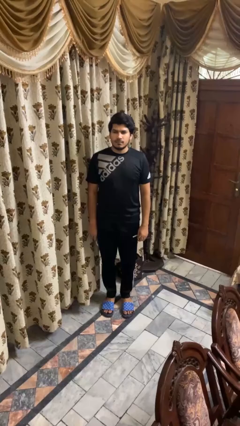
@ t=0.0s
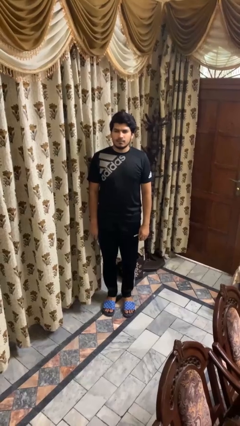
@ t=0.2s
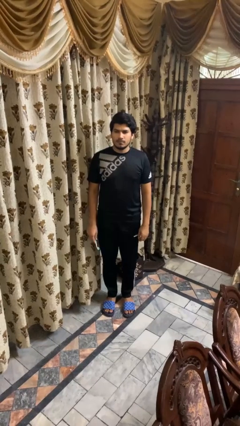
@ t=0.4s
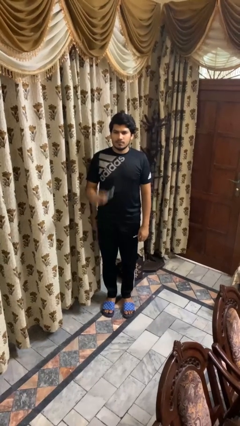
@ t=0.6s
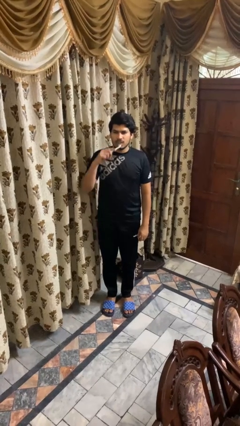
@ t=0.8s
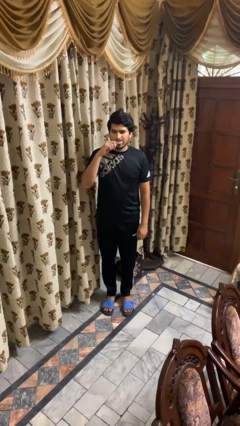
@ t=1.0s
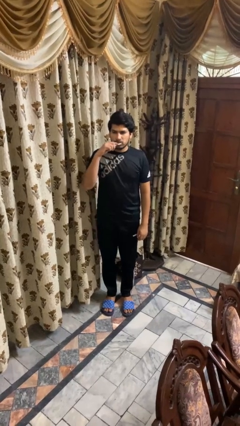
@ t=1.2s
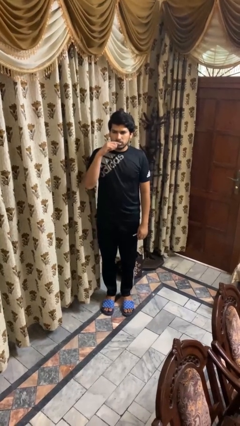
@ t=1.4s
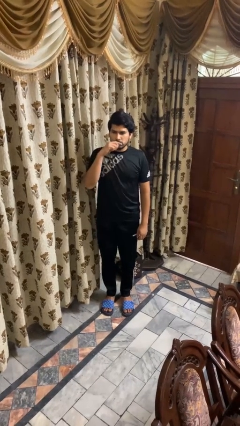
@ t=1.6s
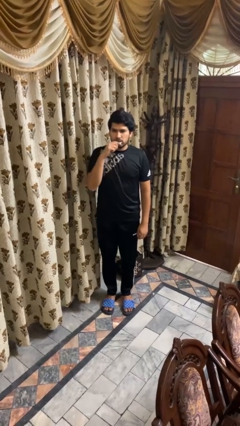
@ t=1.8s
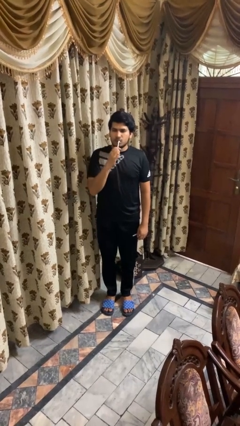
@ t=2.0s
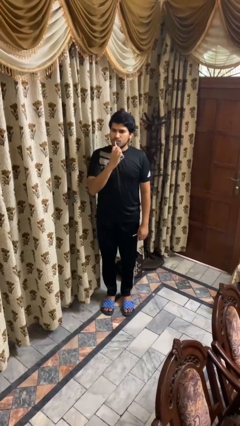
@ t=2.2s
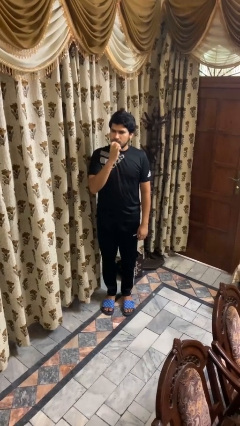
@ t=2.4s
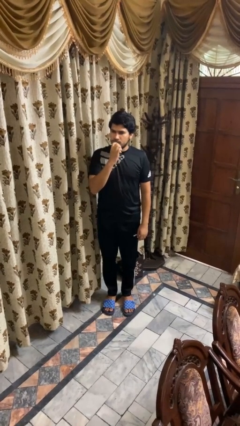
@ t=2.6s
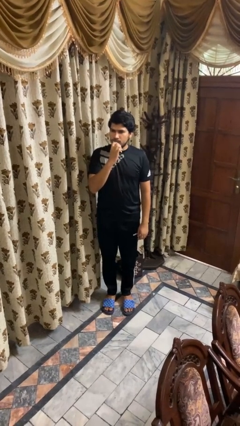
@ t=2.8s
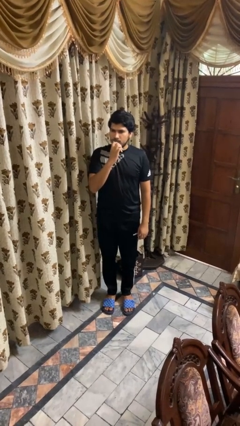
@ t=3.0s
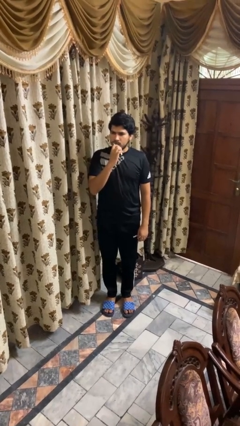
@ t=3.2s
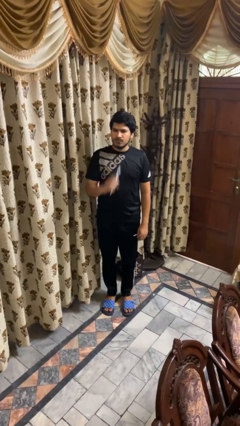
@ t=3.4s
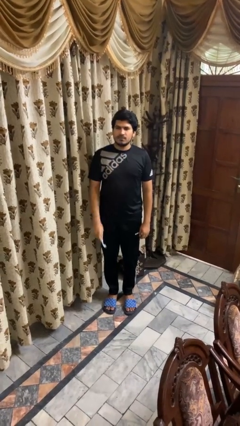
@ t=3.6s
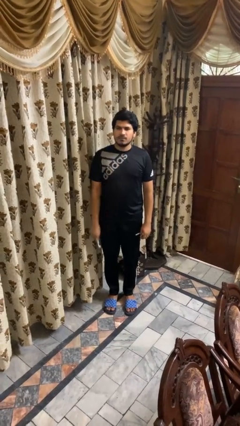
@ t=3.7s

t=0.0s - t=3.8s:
person brushes teeth

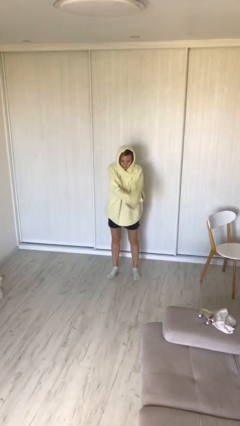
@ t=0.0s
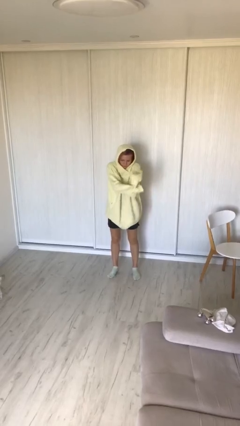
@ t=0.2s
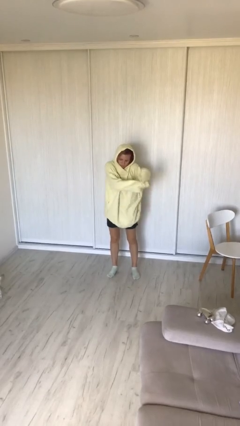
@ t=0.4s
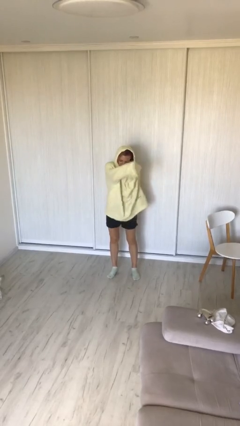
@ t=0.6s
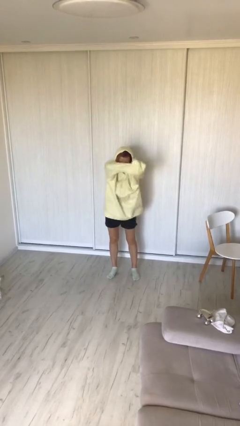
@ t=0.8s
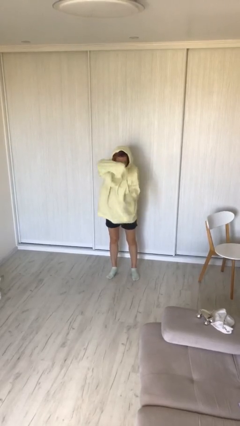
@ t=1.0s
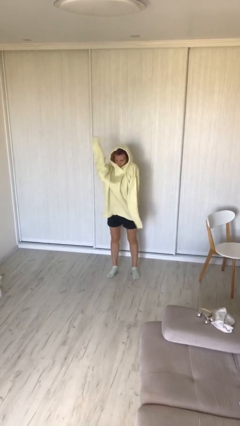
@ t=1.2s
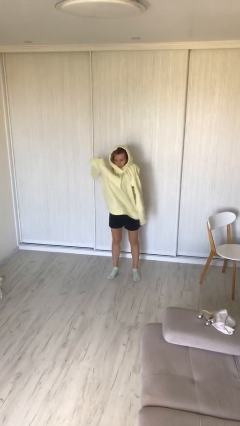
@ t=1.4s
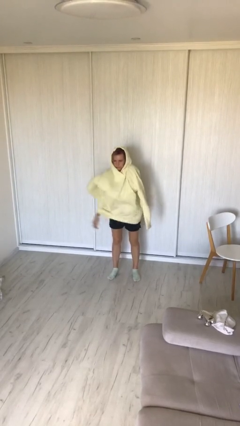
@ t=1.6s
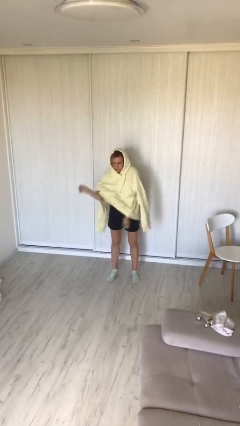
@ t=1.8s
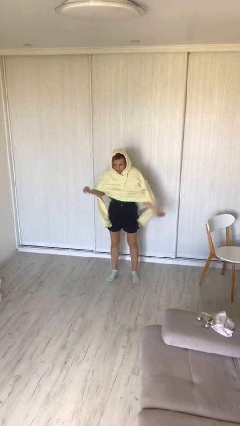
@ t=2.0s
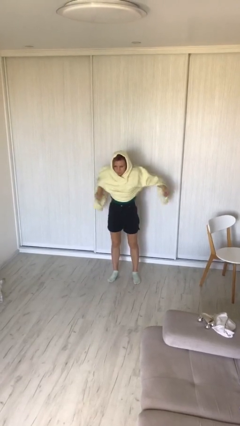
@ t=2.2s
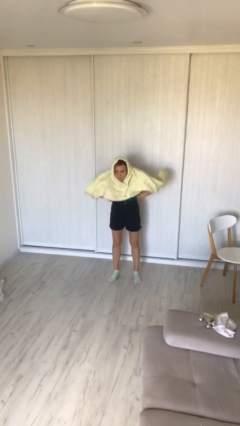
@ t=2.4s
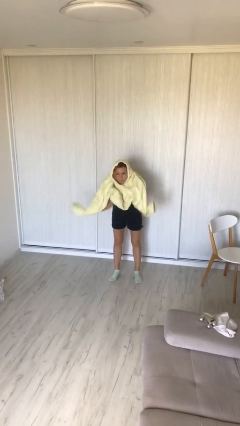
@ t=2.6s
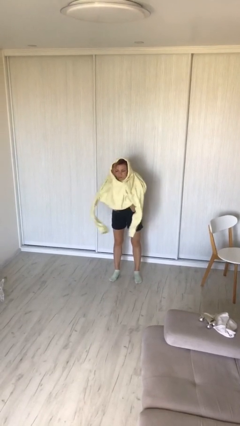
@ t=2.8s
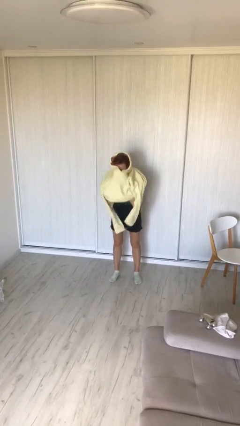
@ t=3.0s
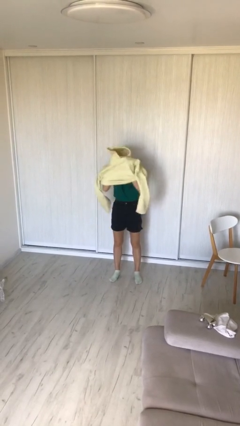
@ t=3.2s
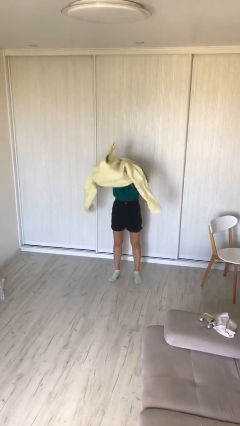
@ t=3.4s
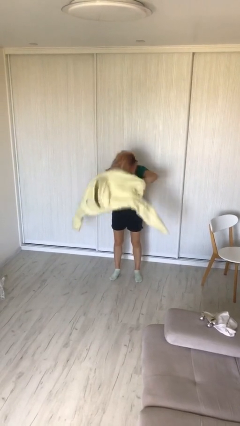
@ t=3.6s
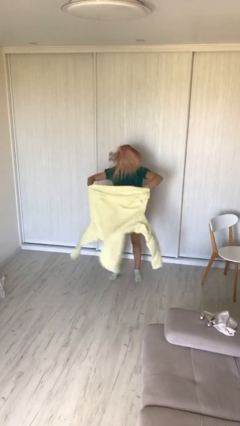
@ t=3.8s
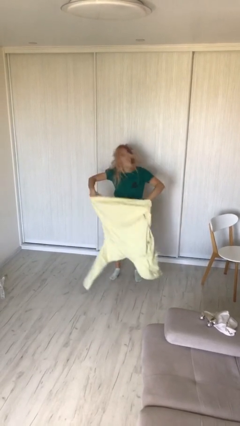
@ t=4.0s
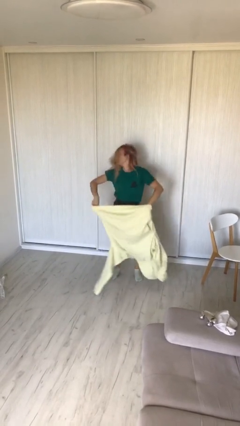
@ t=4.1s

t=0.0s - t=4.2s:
person takes off hoodie

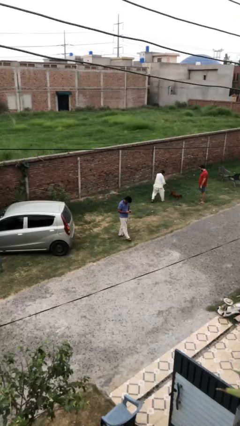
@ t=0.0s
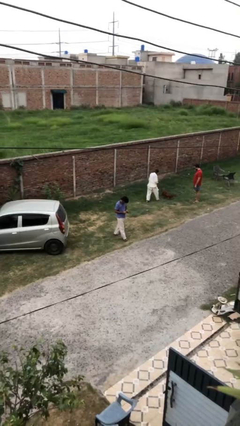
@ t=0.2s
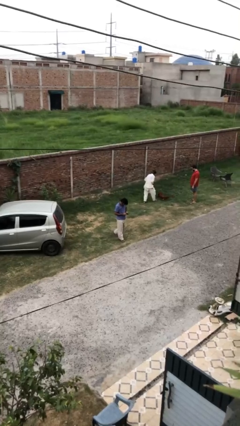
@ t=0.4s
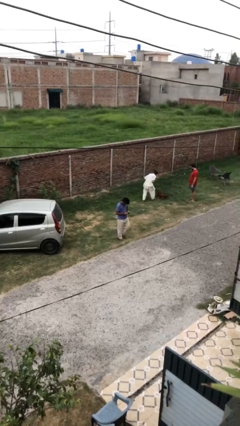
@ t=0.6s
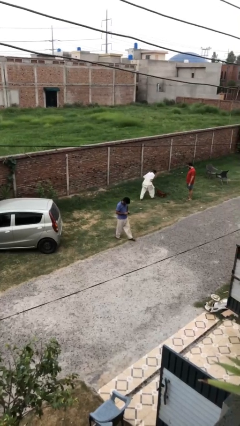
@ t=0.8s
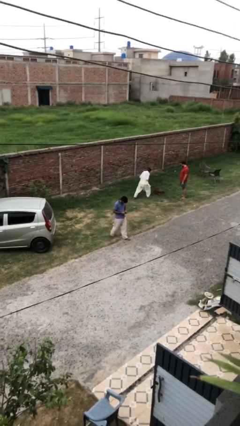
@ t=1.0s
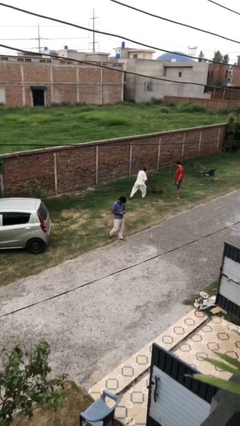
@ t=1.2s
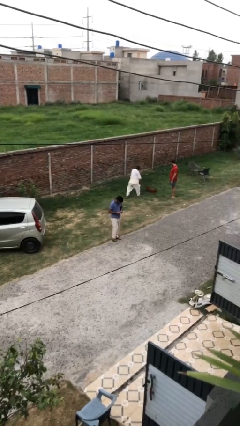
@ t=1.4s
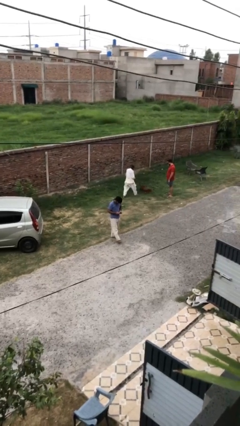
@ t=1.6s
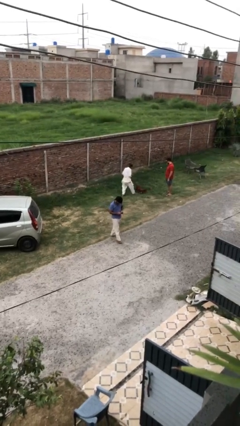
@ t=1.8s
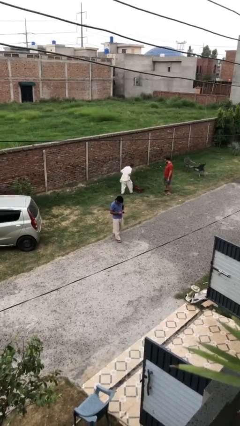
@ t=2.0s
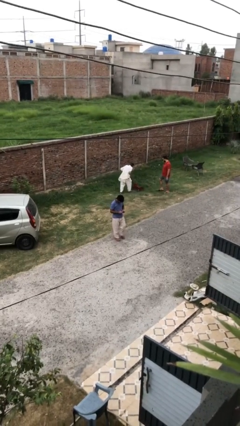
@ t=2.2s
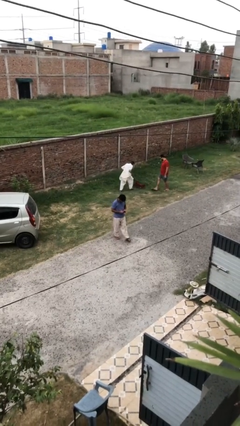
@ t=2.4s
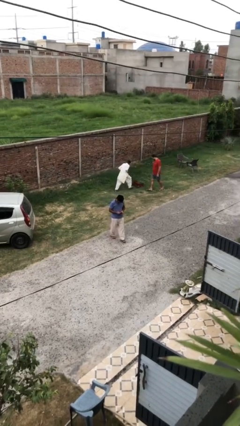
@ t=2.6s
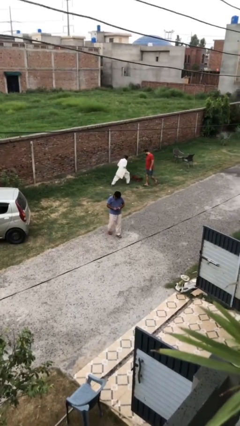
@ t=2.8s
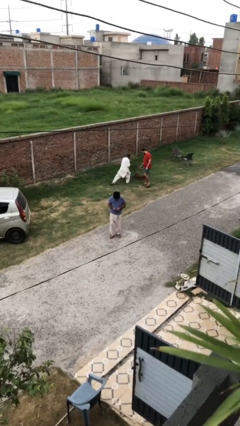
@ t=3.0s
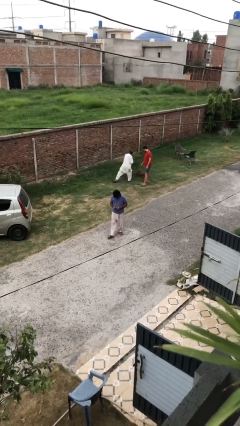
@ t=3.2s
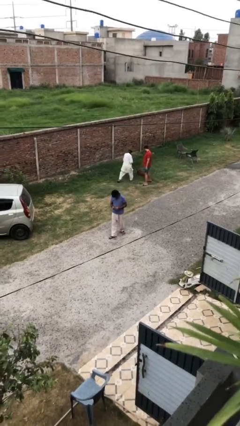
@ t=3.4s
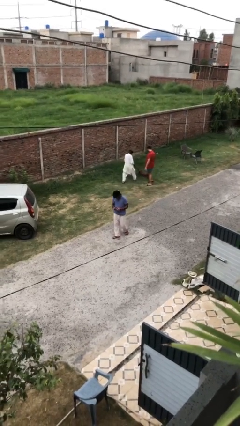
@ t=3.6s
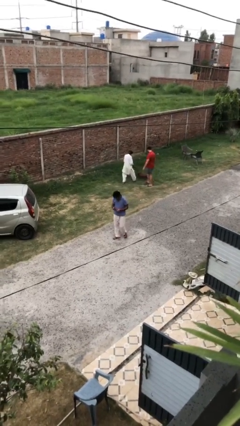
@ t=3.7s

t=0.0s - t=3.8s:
person texts on phone

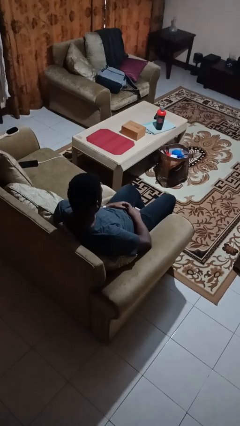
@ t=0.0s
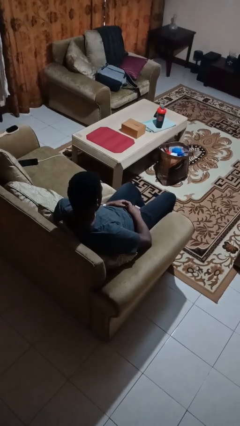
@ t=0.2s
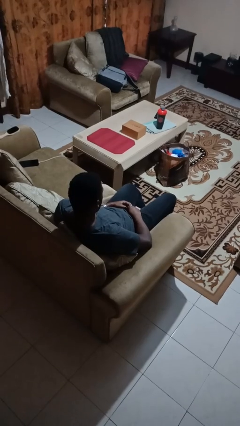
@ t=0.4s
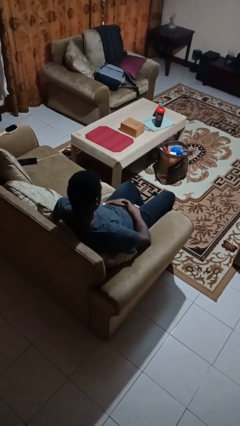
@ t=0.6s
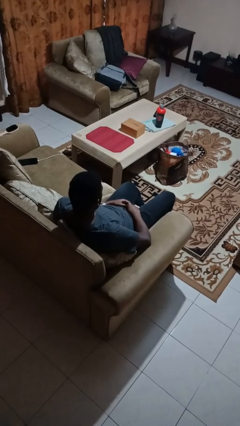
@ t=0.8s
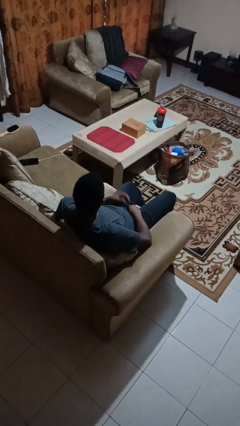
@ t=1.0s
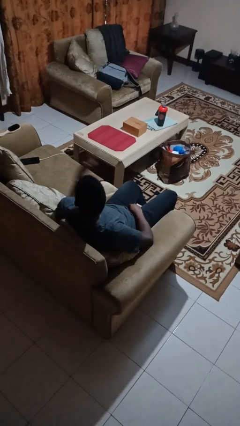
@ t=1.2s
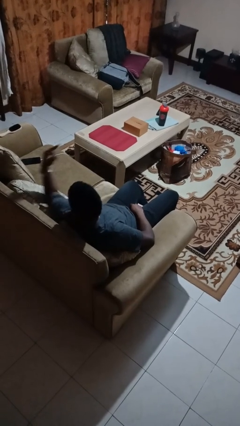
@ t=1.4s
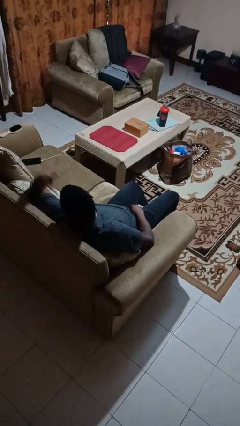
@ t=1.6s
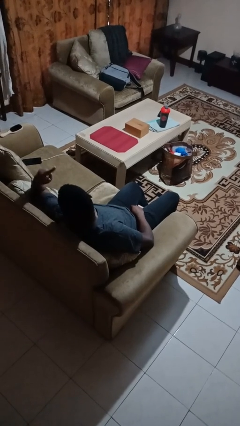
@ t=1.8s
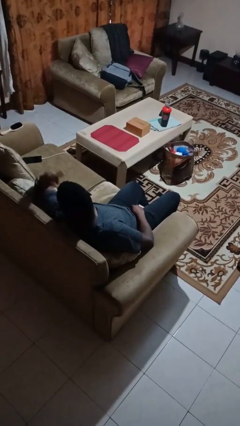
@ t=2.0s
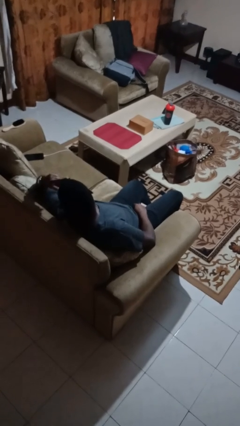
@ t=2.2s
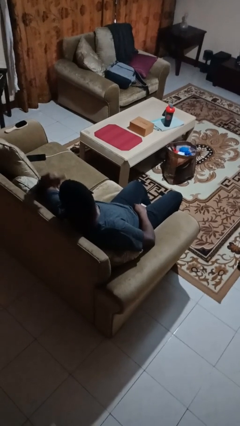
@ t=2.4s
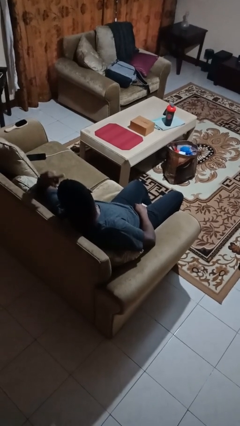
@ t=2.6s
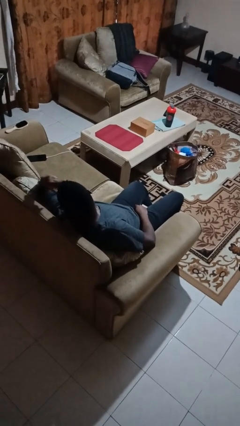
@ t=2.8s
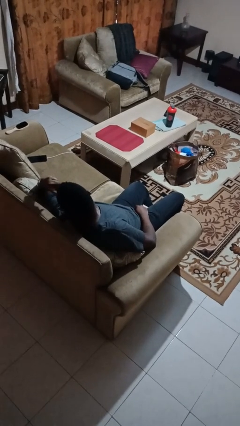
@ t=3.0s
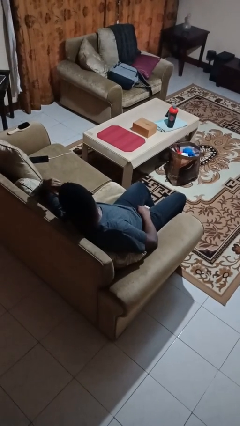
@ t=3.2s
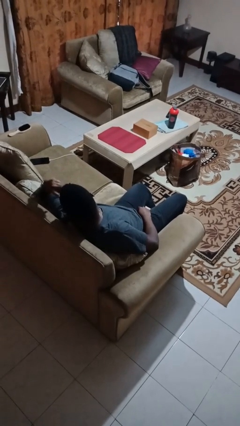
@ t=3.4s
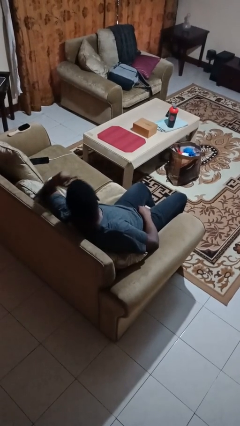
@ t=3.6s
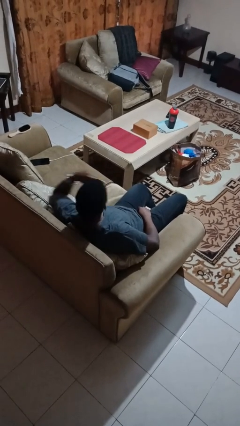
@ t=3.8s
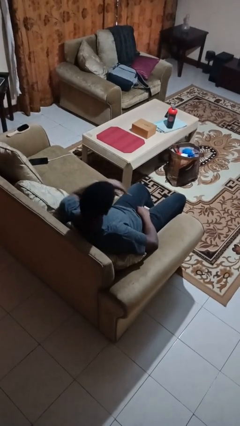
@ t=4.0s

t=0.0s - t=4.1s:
person gestures watch closely

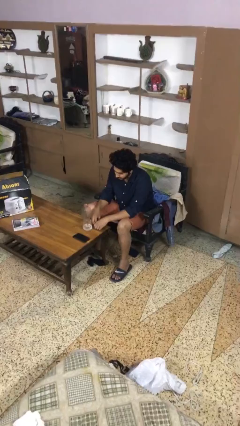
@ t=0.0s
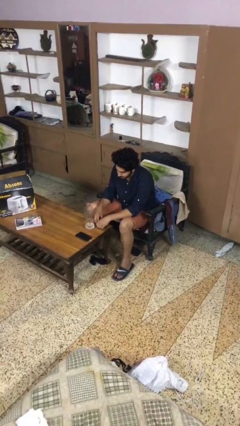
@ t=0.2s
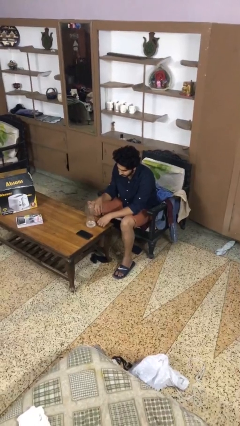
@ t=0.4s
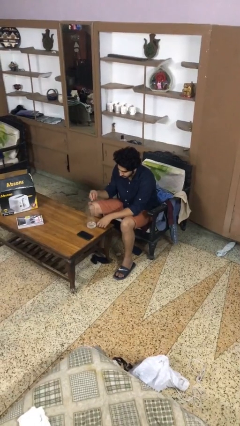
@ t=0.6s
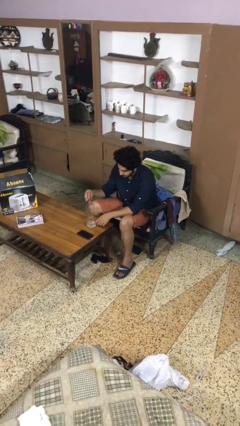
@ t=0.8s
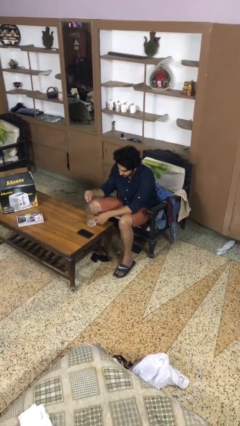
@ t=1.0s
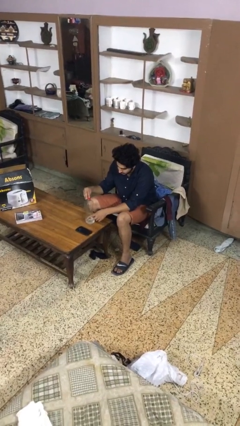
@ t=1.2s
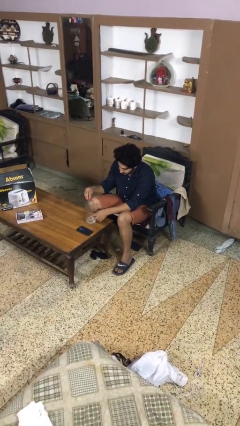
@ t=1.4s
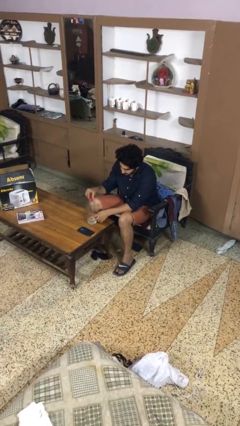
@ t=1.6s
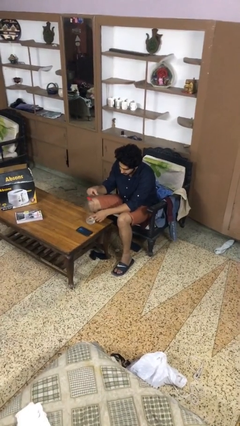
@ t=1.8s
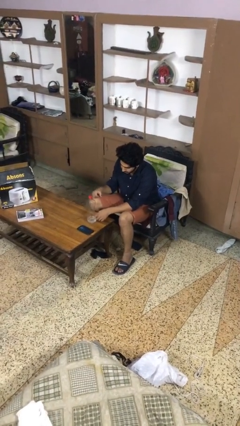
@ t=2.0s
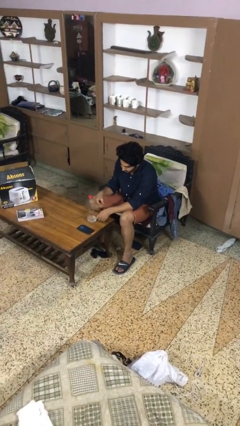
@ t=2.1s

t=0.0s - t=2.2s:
person screws lid to bottle
